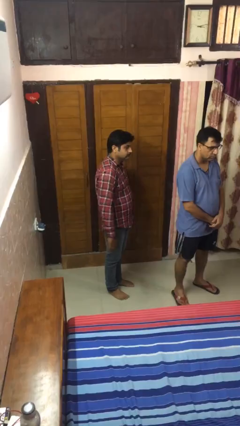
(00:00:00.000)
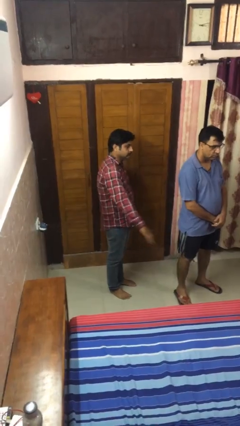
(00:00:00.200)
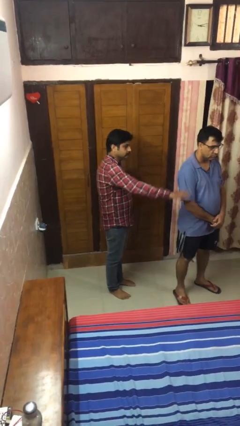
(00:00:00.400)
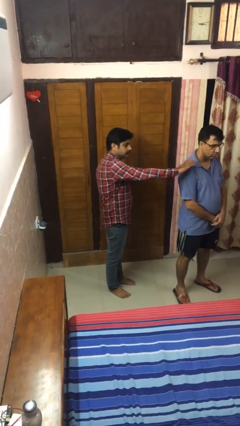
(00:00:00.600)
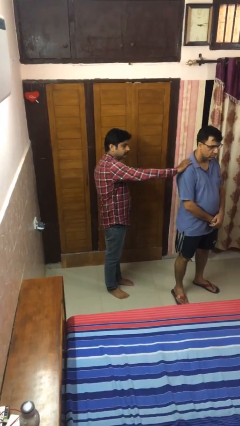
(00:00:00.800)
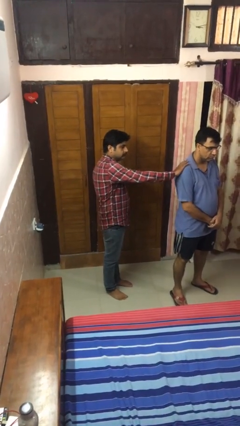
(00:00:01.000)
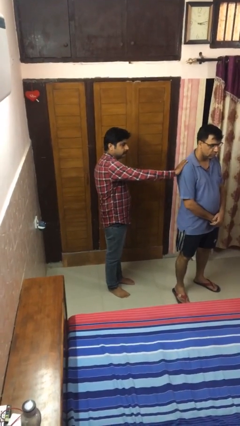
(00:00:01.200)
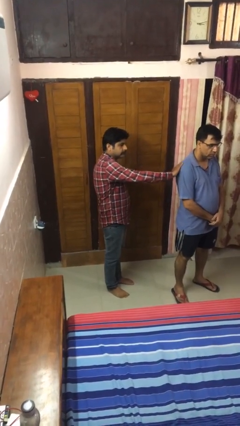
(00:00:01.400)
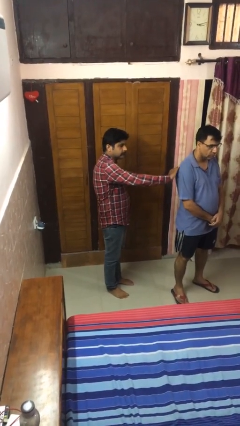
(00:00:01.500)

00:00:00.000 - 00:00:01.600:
person touches back of person

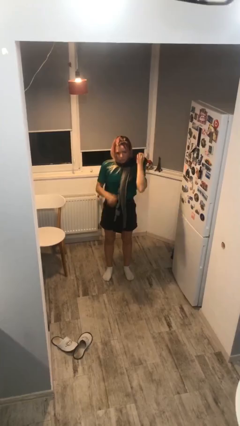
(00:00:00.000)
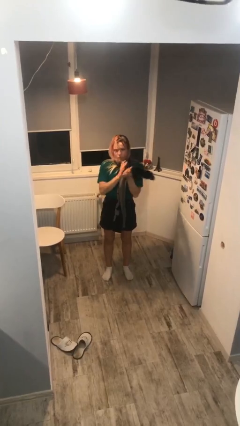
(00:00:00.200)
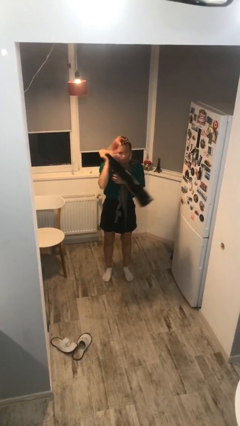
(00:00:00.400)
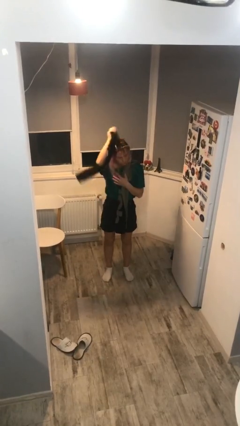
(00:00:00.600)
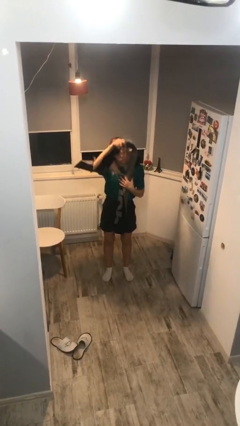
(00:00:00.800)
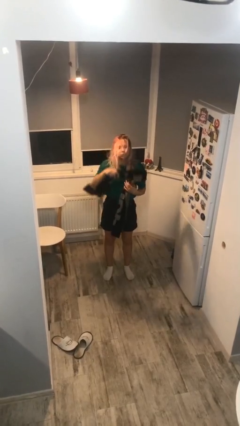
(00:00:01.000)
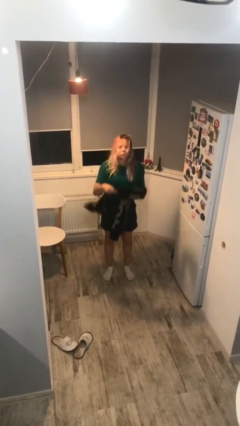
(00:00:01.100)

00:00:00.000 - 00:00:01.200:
person takes off scarf

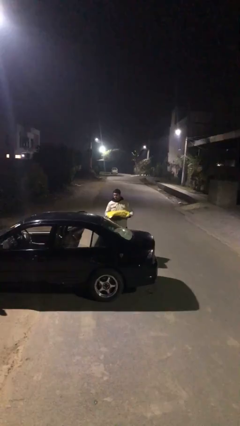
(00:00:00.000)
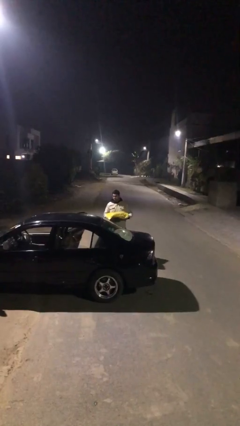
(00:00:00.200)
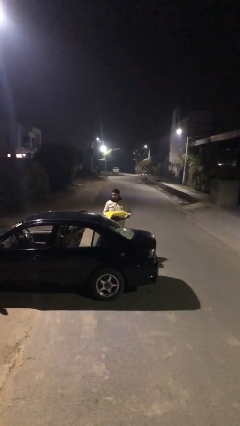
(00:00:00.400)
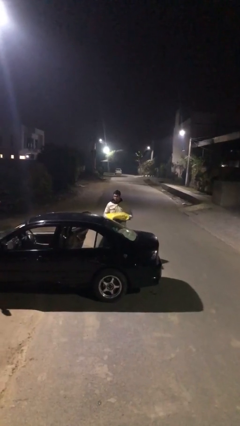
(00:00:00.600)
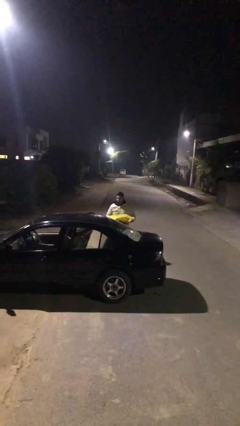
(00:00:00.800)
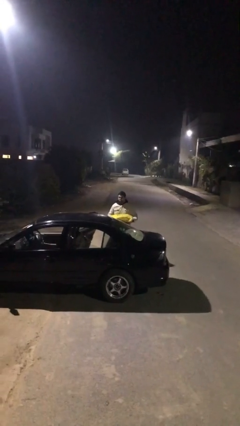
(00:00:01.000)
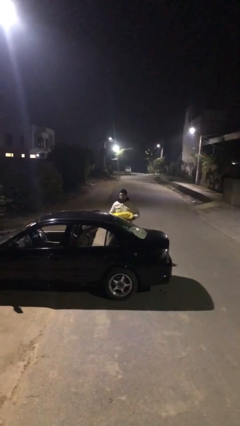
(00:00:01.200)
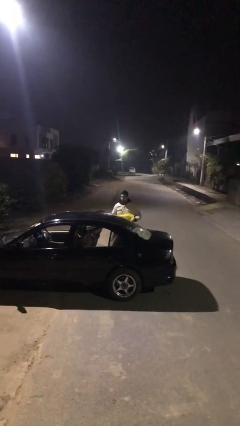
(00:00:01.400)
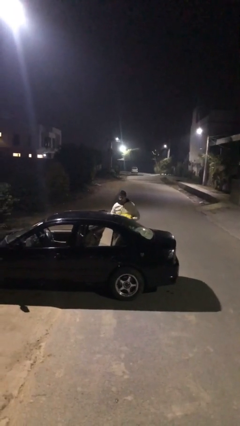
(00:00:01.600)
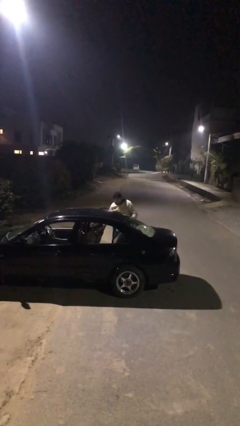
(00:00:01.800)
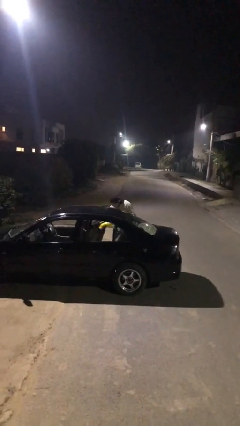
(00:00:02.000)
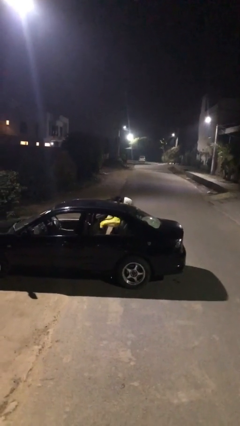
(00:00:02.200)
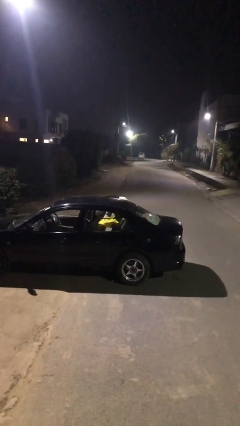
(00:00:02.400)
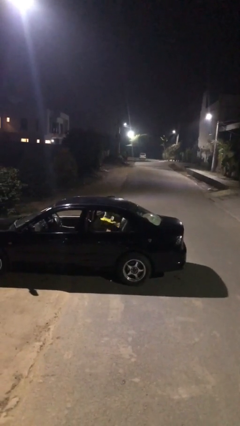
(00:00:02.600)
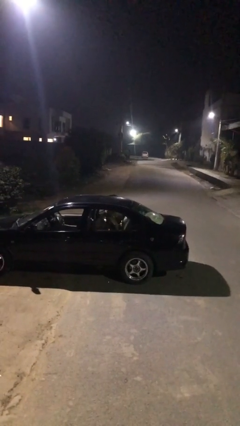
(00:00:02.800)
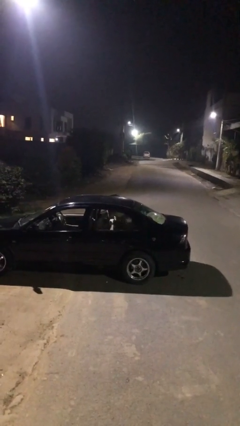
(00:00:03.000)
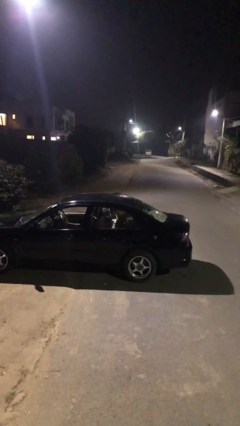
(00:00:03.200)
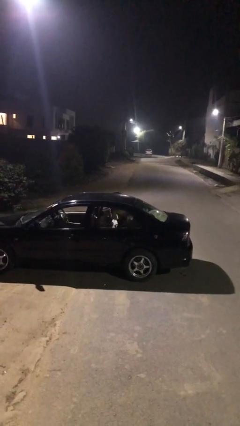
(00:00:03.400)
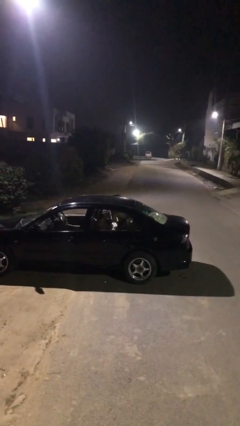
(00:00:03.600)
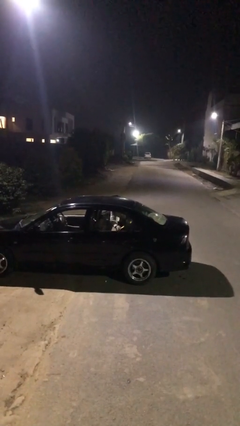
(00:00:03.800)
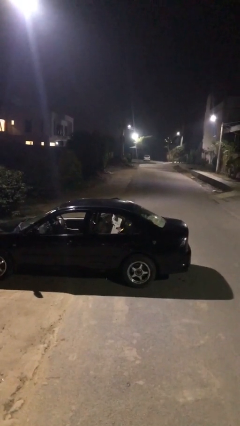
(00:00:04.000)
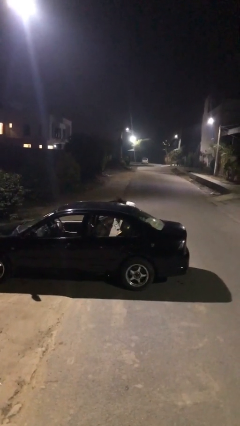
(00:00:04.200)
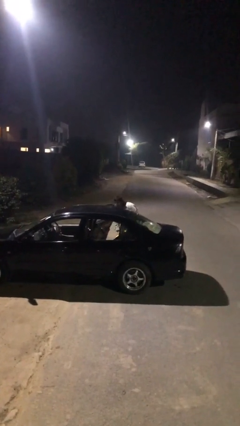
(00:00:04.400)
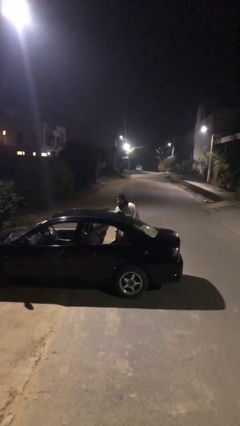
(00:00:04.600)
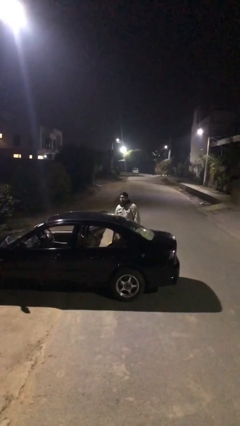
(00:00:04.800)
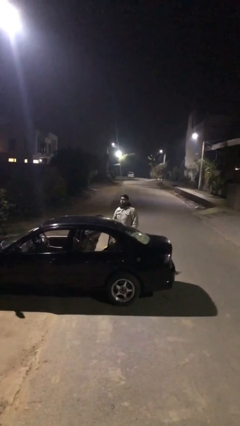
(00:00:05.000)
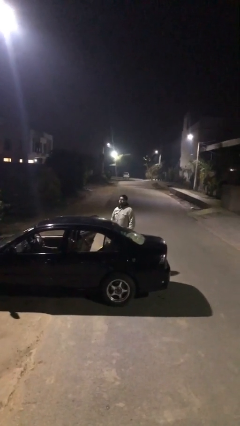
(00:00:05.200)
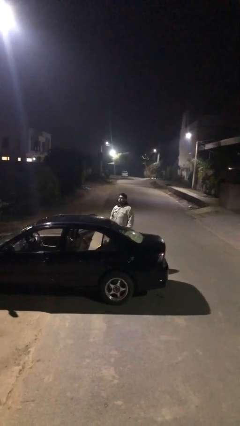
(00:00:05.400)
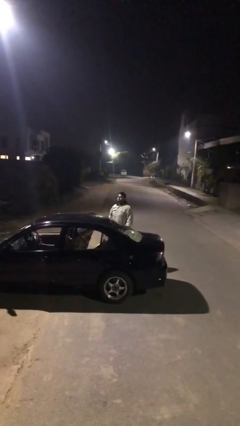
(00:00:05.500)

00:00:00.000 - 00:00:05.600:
person loads car

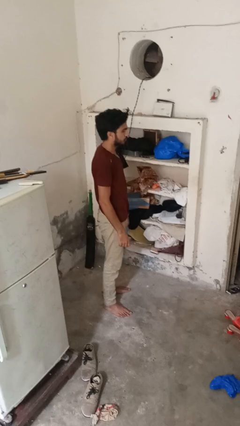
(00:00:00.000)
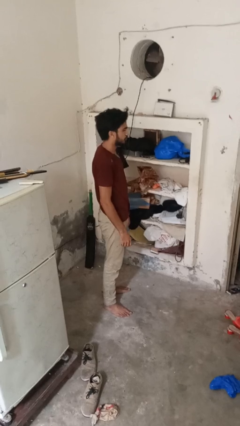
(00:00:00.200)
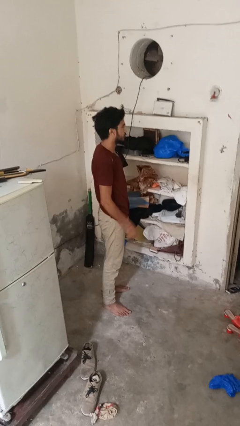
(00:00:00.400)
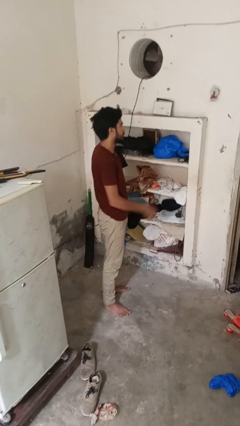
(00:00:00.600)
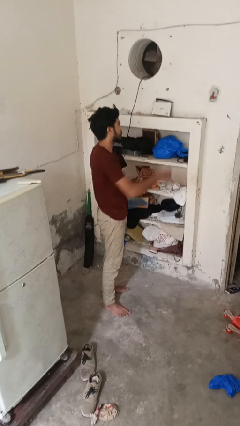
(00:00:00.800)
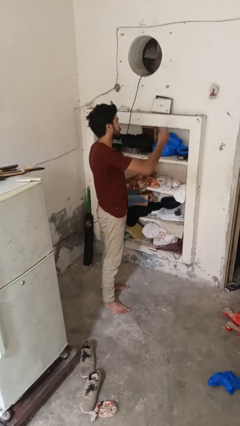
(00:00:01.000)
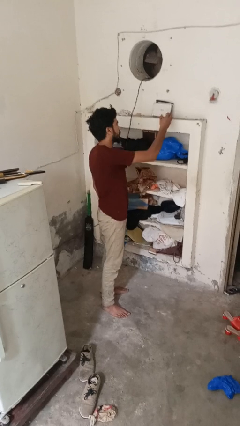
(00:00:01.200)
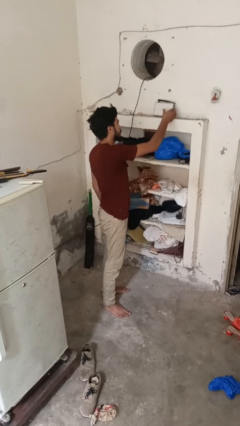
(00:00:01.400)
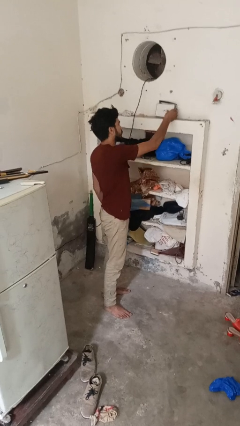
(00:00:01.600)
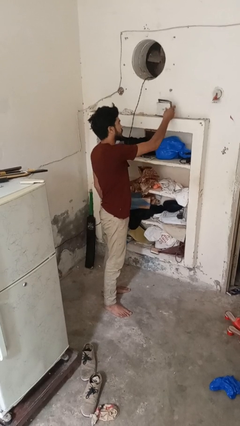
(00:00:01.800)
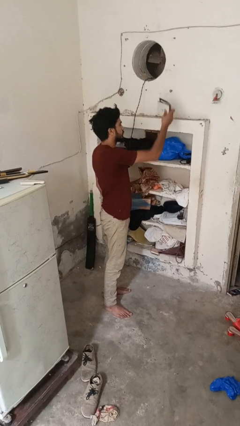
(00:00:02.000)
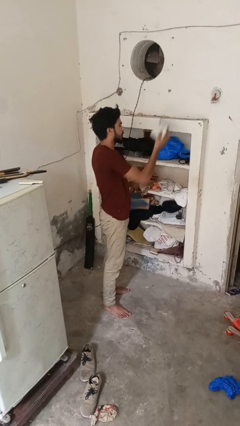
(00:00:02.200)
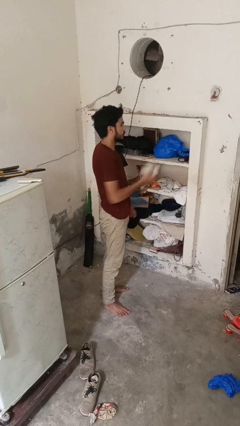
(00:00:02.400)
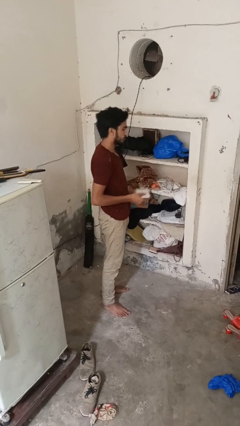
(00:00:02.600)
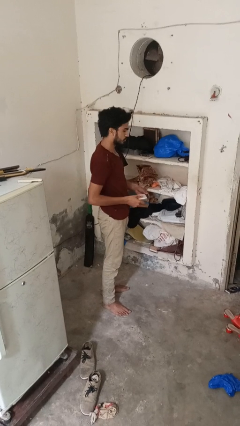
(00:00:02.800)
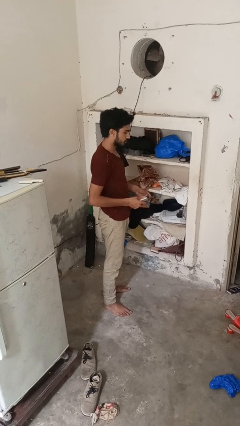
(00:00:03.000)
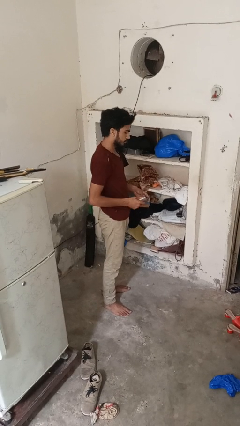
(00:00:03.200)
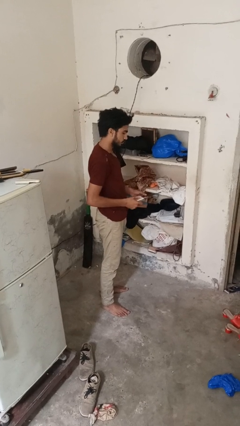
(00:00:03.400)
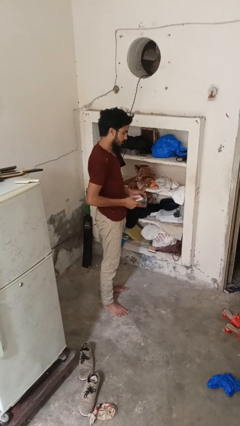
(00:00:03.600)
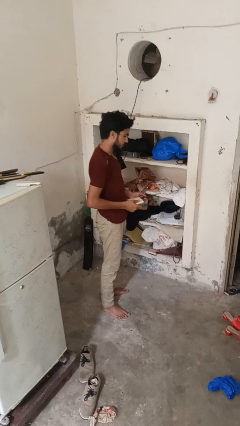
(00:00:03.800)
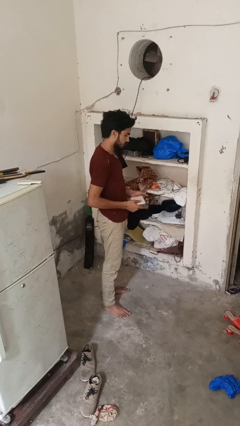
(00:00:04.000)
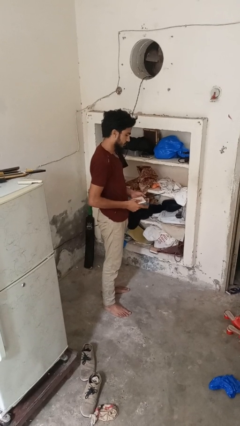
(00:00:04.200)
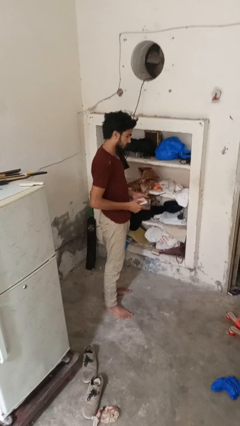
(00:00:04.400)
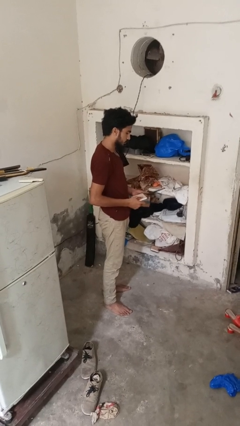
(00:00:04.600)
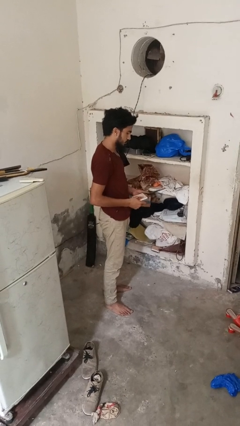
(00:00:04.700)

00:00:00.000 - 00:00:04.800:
person picks up object from shelf

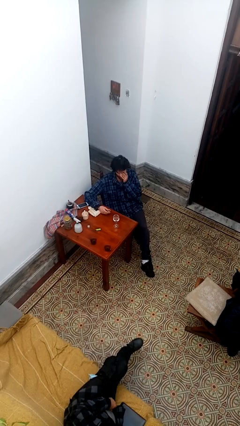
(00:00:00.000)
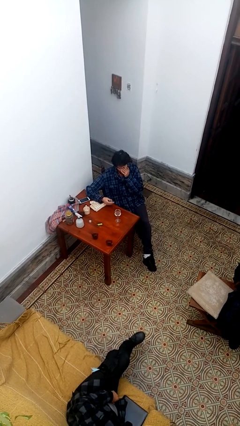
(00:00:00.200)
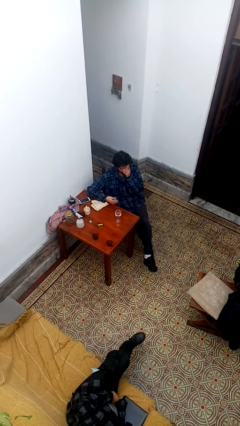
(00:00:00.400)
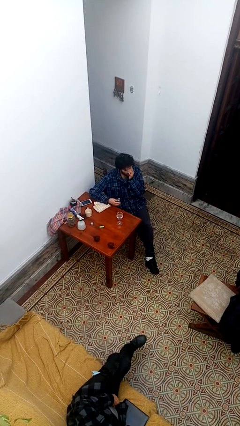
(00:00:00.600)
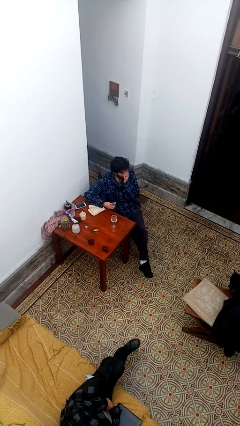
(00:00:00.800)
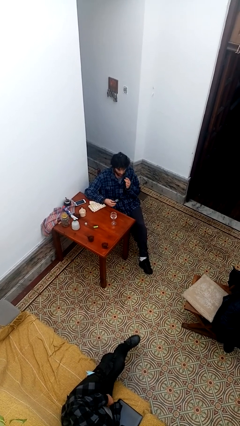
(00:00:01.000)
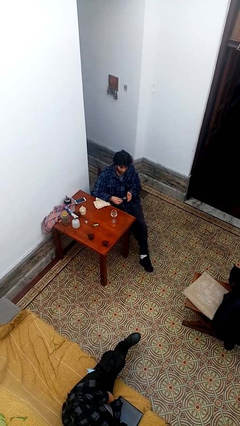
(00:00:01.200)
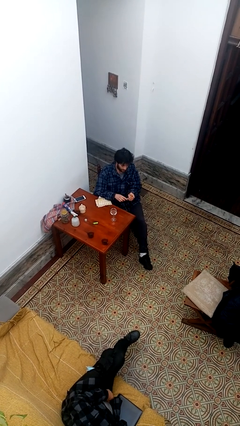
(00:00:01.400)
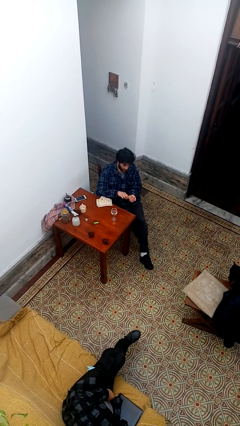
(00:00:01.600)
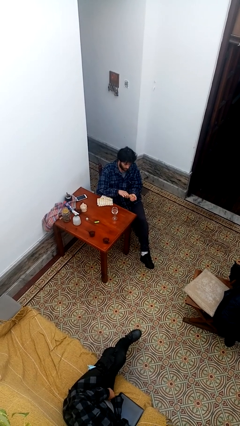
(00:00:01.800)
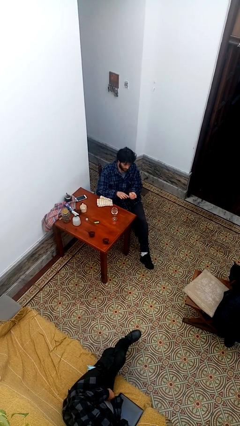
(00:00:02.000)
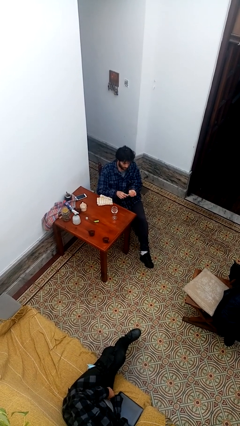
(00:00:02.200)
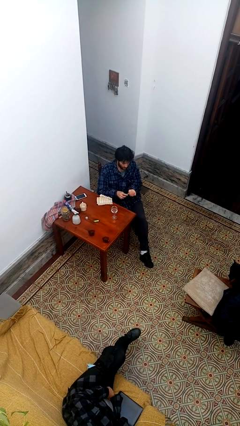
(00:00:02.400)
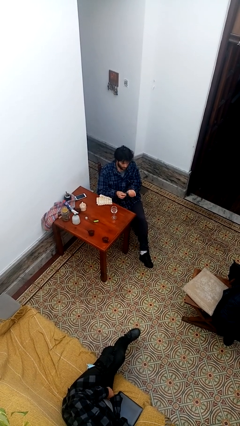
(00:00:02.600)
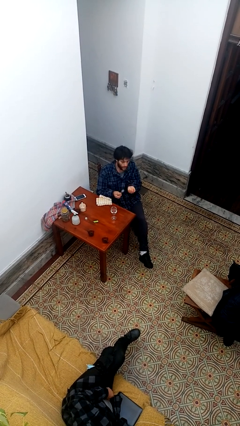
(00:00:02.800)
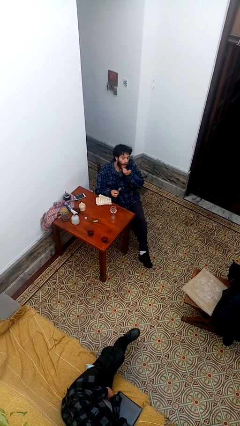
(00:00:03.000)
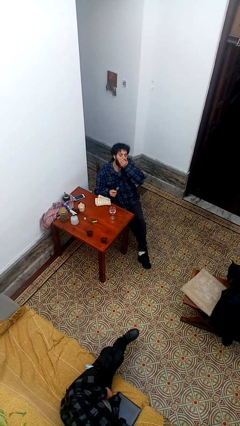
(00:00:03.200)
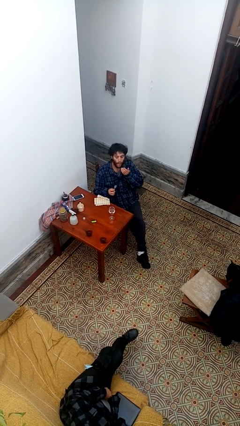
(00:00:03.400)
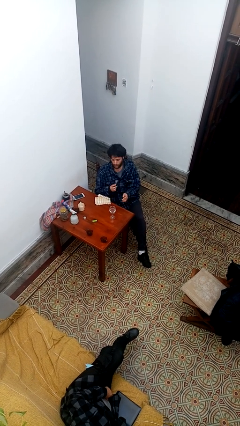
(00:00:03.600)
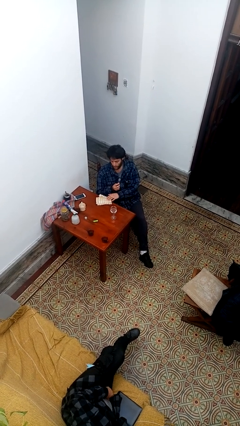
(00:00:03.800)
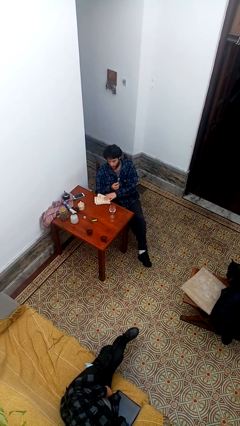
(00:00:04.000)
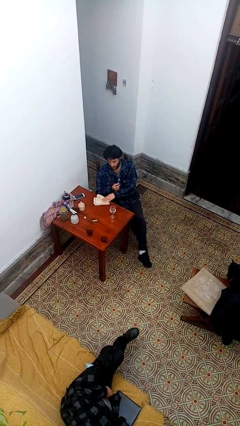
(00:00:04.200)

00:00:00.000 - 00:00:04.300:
person takes medicine pills
